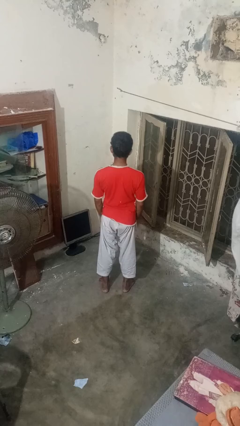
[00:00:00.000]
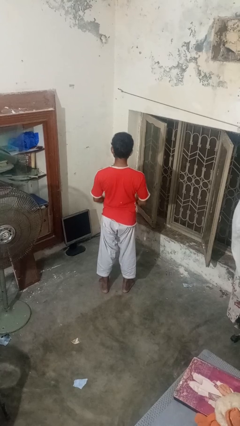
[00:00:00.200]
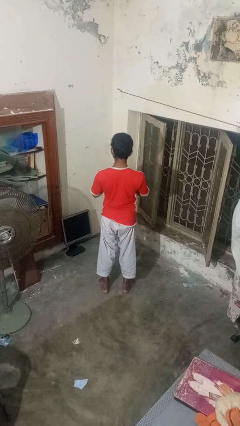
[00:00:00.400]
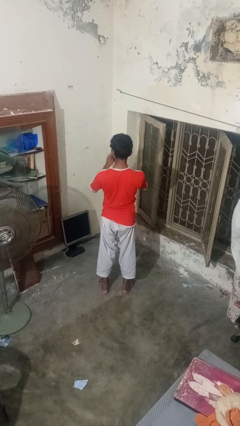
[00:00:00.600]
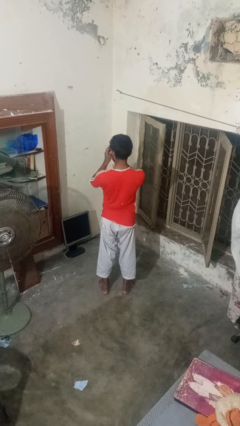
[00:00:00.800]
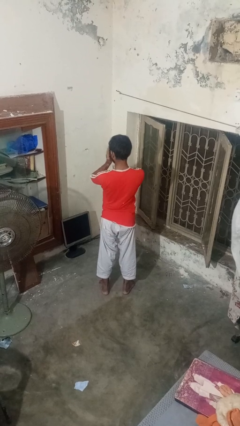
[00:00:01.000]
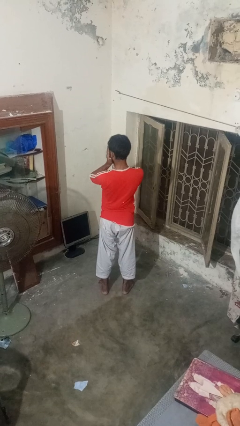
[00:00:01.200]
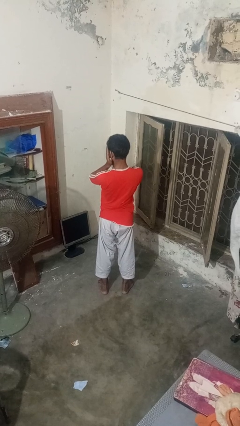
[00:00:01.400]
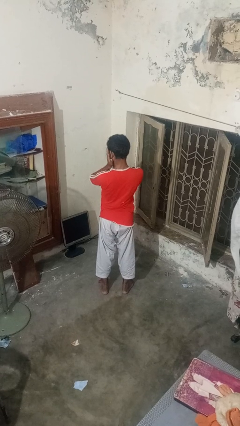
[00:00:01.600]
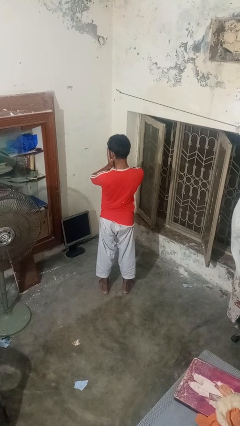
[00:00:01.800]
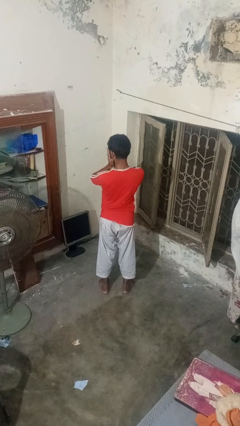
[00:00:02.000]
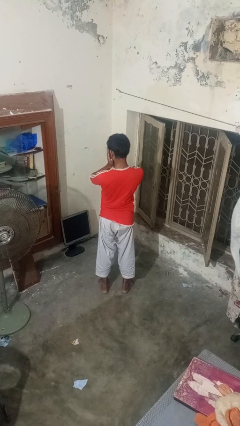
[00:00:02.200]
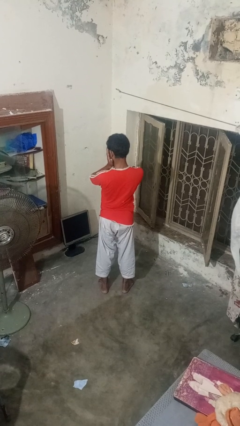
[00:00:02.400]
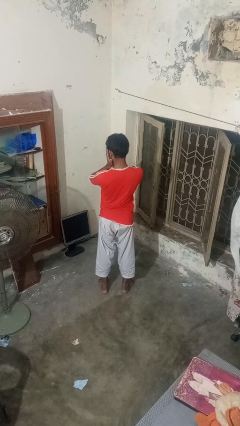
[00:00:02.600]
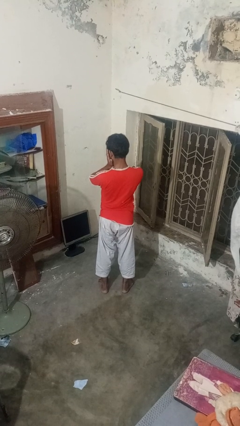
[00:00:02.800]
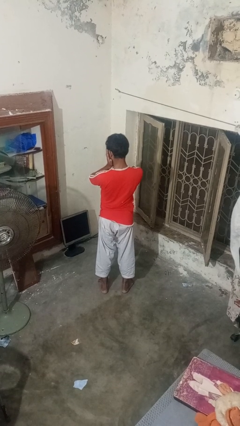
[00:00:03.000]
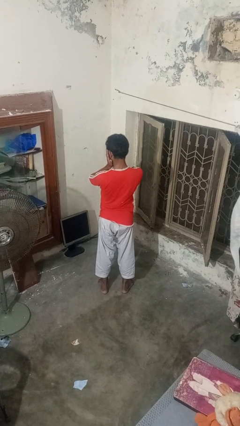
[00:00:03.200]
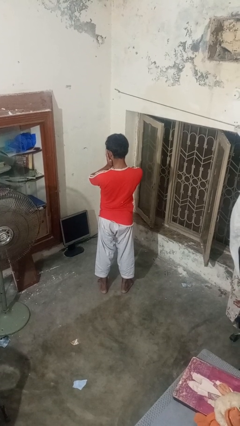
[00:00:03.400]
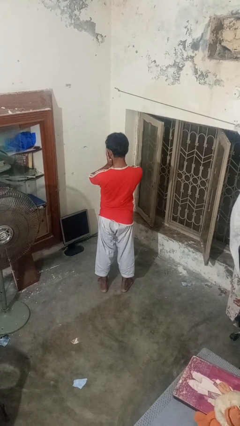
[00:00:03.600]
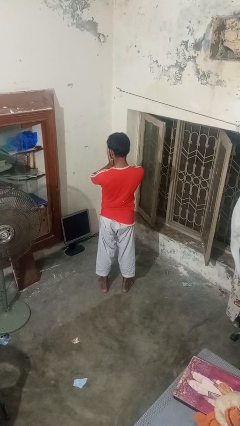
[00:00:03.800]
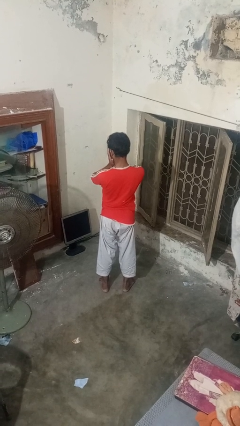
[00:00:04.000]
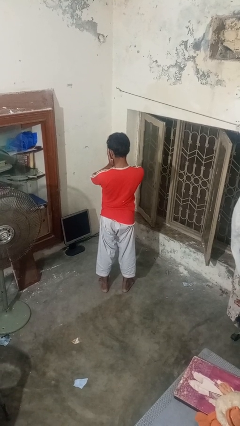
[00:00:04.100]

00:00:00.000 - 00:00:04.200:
person covers face with hands

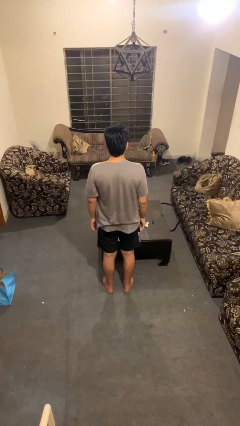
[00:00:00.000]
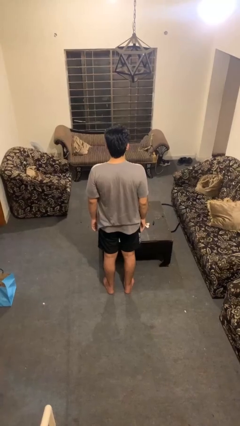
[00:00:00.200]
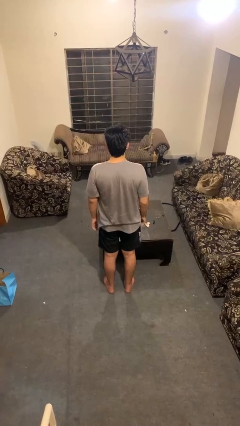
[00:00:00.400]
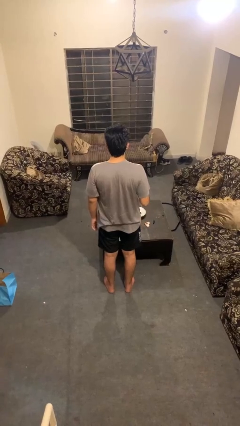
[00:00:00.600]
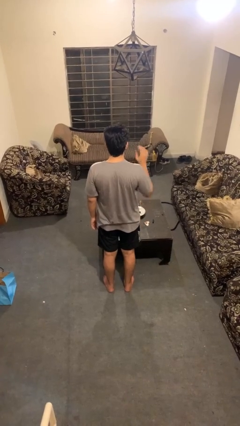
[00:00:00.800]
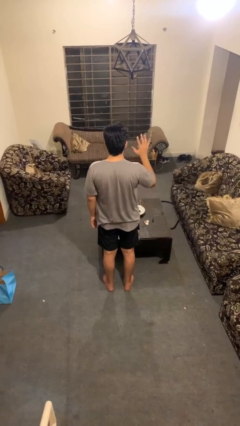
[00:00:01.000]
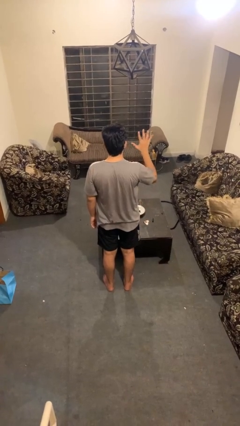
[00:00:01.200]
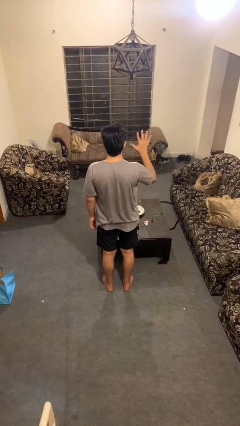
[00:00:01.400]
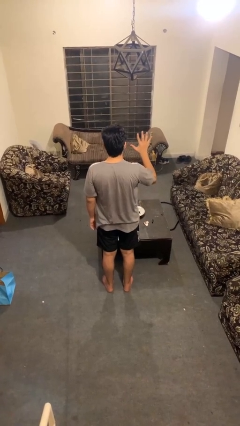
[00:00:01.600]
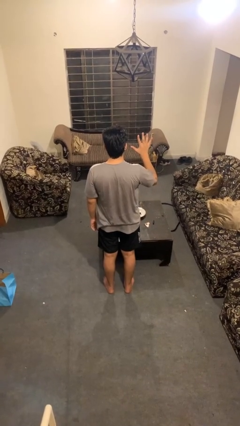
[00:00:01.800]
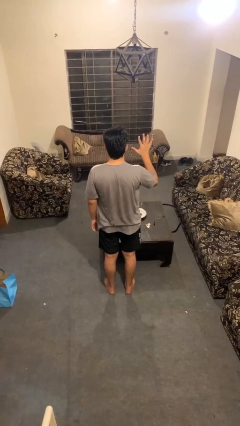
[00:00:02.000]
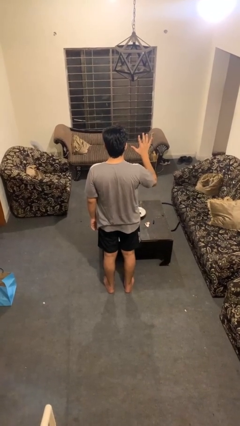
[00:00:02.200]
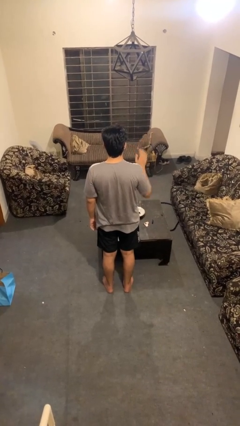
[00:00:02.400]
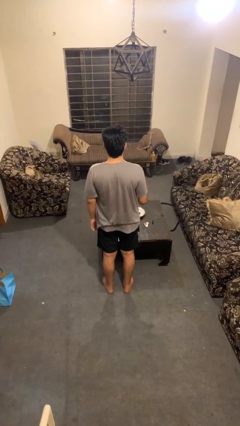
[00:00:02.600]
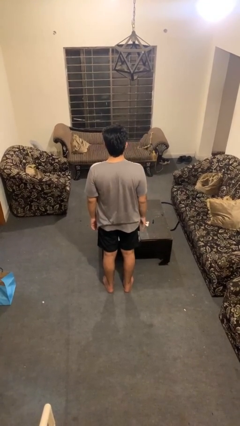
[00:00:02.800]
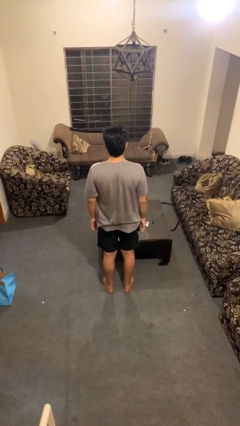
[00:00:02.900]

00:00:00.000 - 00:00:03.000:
person gestures number five

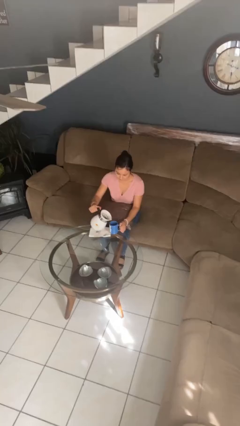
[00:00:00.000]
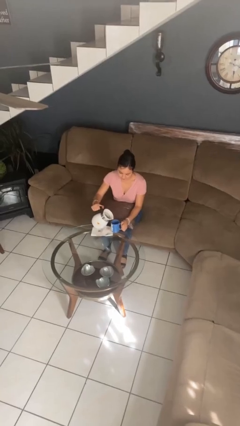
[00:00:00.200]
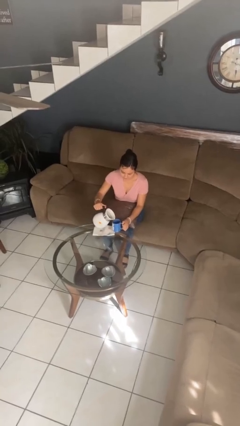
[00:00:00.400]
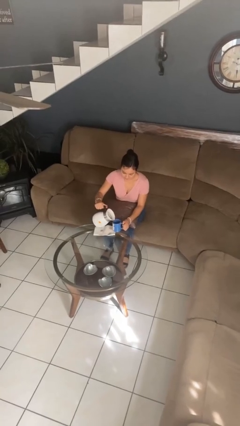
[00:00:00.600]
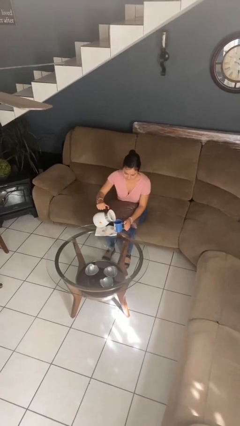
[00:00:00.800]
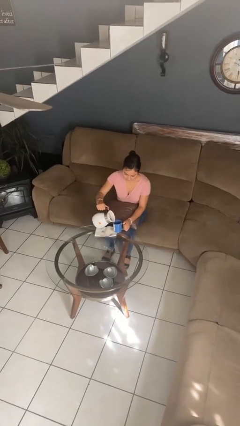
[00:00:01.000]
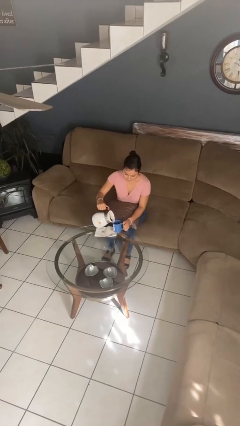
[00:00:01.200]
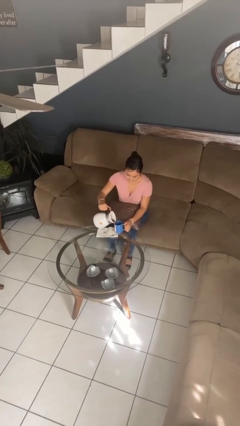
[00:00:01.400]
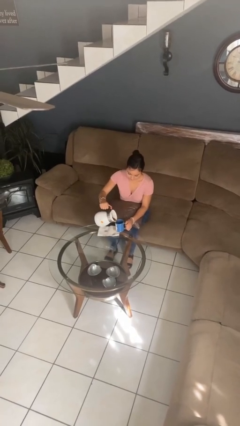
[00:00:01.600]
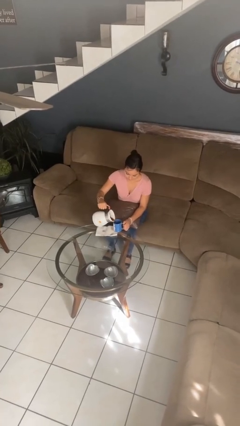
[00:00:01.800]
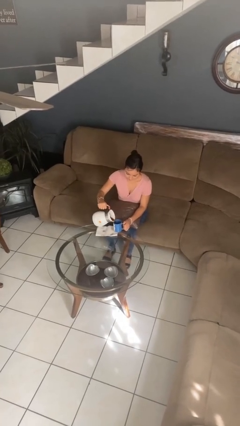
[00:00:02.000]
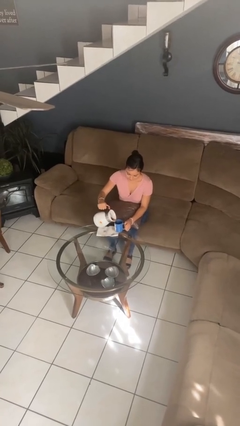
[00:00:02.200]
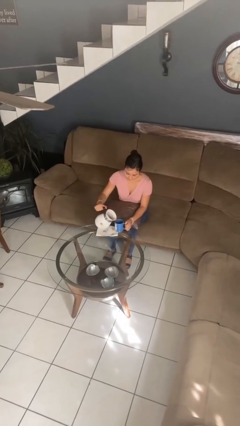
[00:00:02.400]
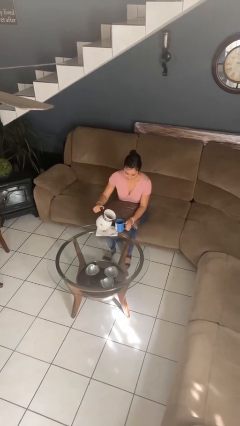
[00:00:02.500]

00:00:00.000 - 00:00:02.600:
person pours coffee into mug

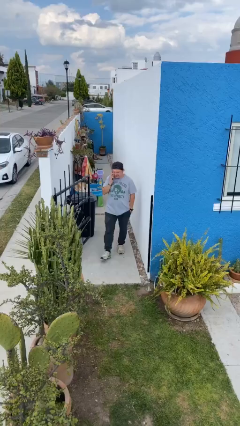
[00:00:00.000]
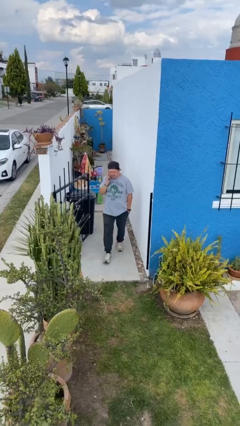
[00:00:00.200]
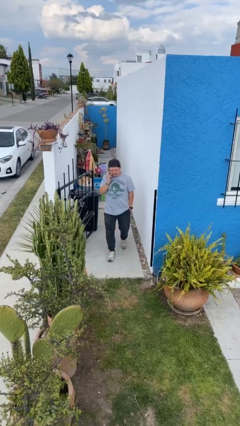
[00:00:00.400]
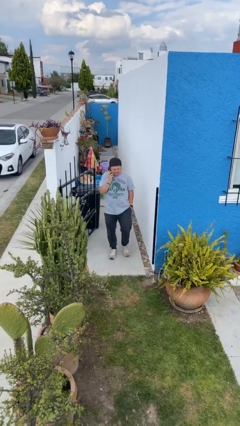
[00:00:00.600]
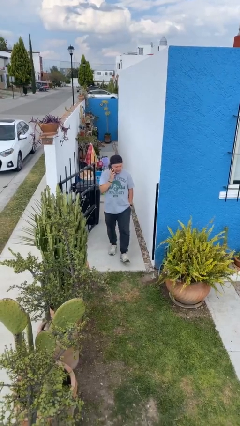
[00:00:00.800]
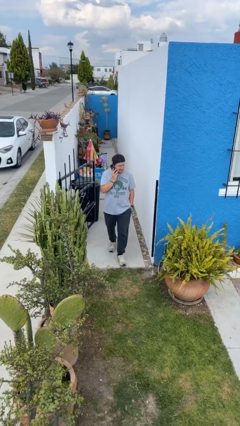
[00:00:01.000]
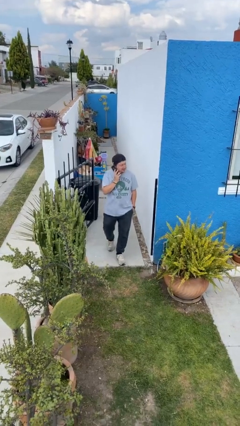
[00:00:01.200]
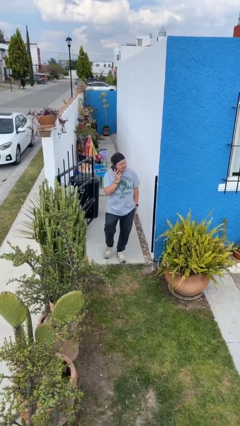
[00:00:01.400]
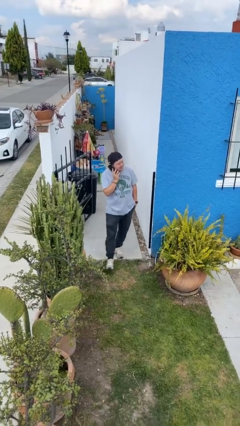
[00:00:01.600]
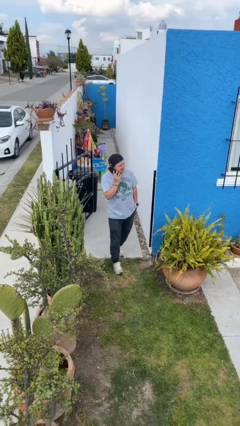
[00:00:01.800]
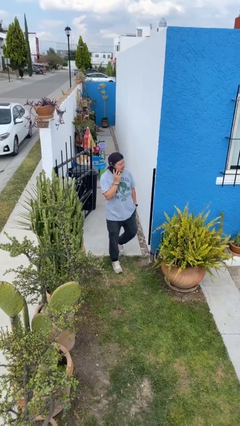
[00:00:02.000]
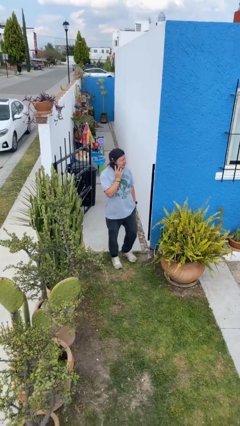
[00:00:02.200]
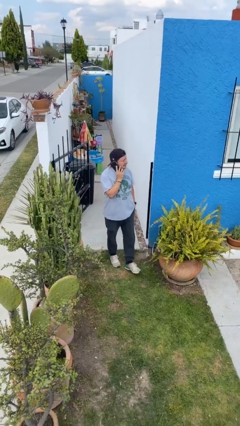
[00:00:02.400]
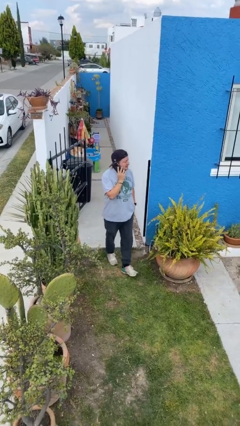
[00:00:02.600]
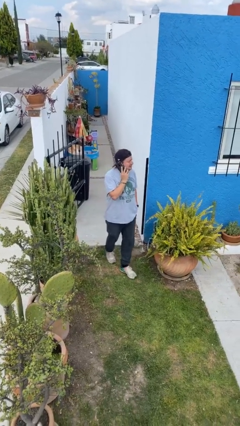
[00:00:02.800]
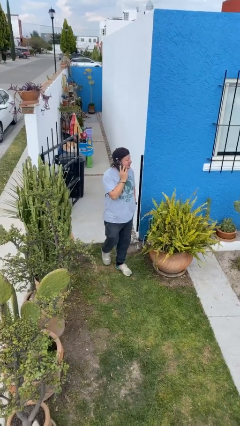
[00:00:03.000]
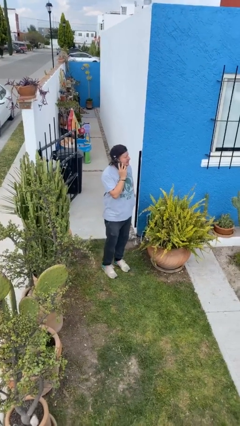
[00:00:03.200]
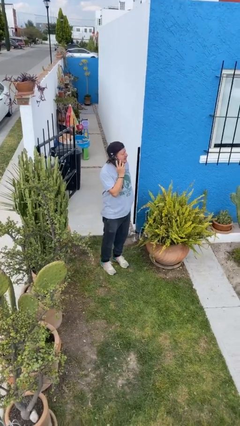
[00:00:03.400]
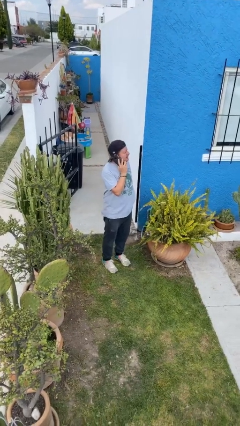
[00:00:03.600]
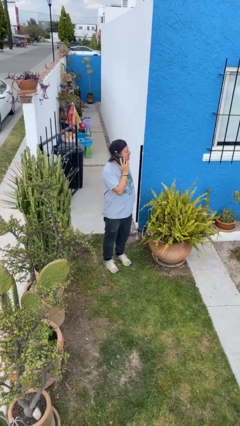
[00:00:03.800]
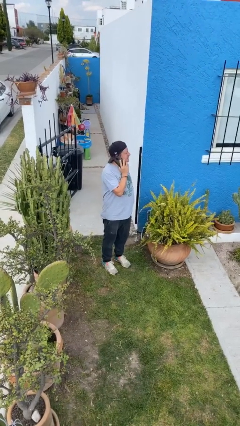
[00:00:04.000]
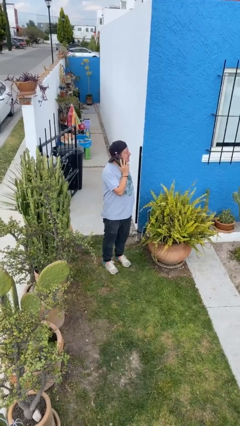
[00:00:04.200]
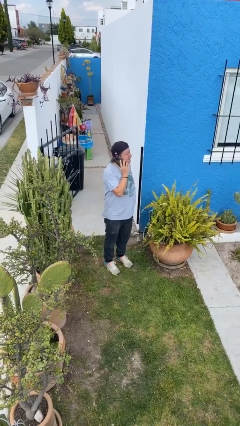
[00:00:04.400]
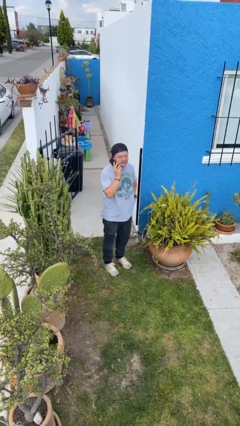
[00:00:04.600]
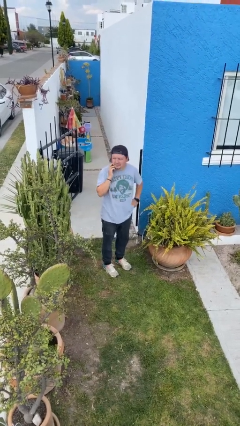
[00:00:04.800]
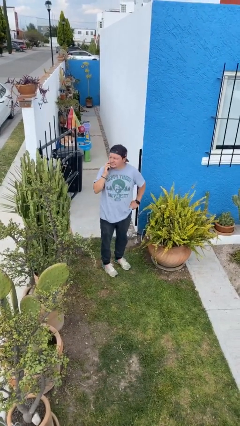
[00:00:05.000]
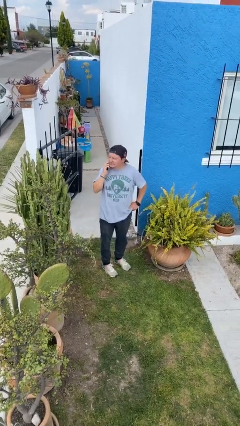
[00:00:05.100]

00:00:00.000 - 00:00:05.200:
person enters scene through structure

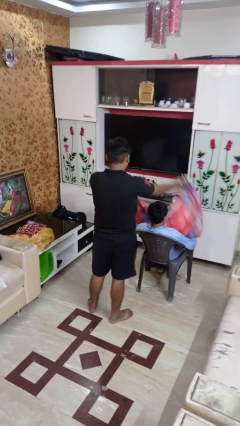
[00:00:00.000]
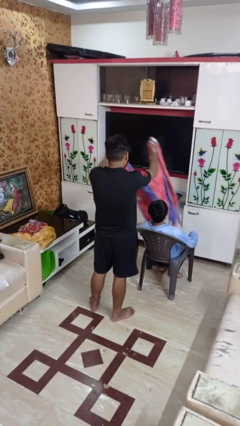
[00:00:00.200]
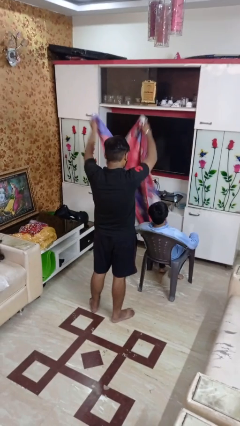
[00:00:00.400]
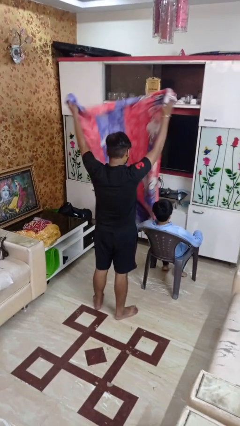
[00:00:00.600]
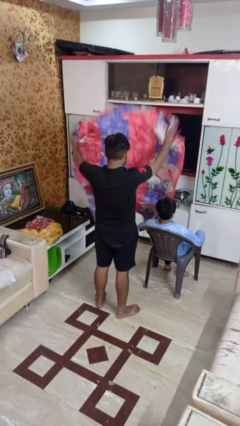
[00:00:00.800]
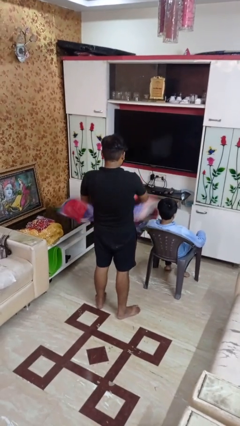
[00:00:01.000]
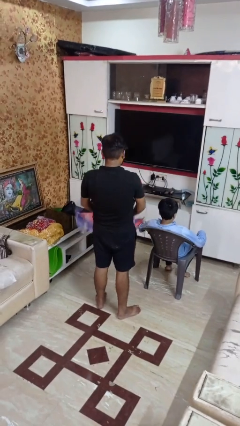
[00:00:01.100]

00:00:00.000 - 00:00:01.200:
person uncovers friend with blanket

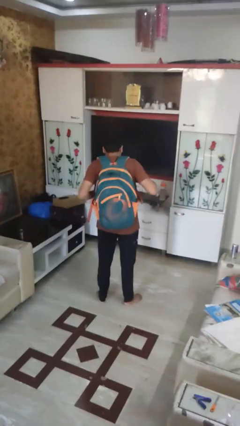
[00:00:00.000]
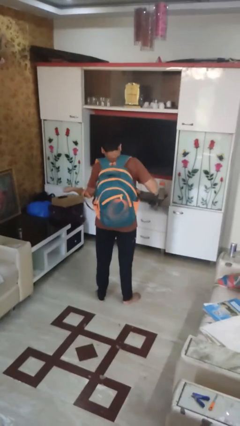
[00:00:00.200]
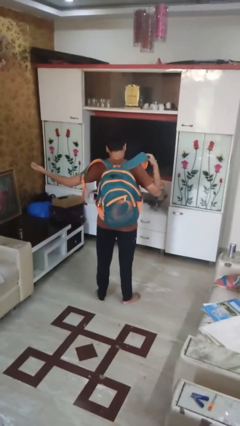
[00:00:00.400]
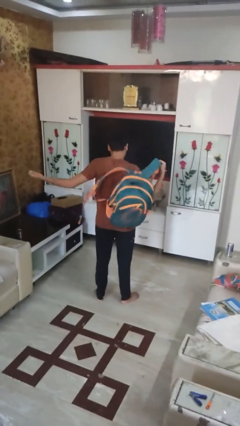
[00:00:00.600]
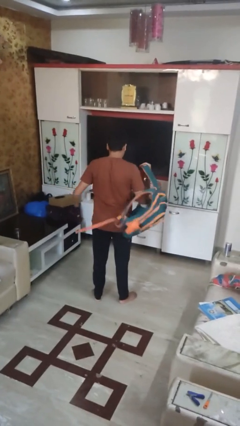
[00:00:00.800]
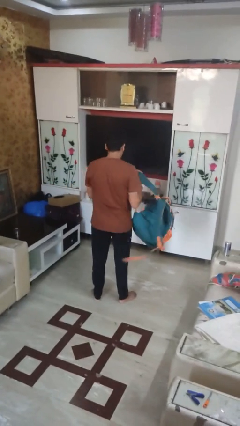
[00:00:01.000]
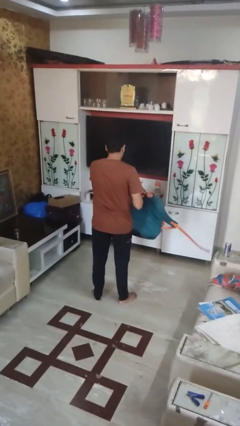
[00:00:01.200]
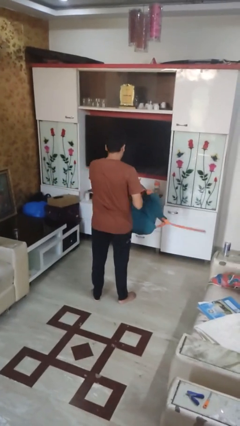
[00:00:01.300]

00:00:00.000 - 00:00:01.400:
person takes off backpack
